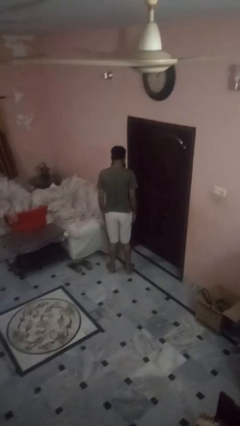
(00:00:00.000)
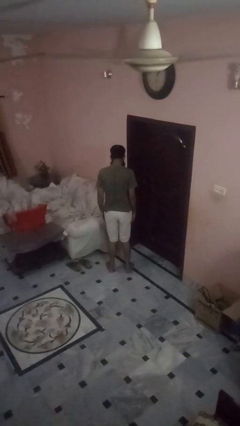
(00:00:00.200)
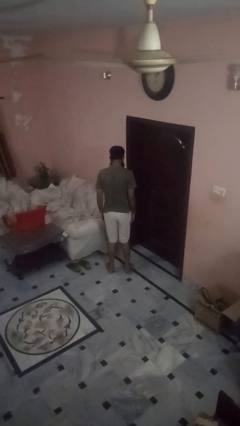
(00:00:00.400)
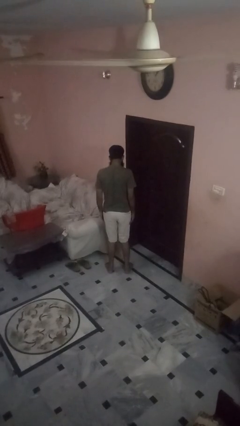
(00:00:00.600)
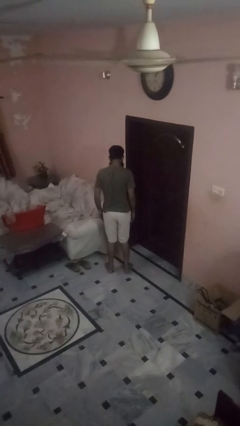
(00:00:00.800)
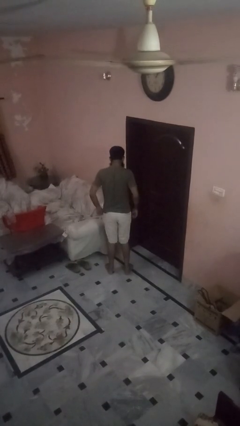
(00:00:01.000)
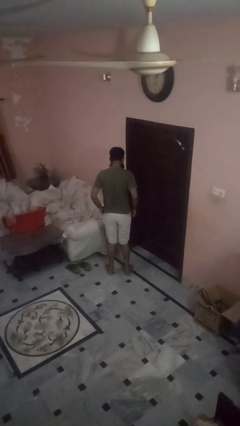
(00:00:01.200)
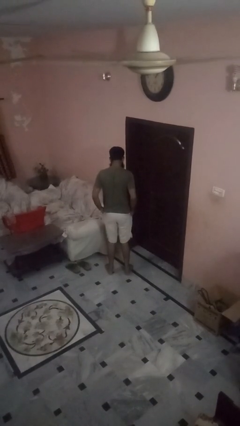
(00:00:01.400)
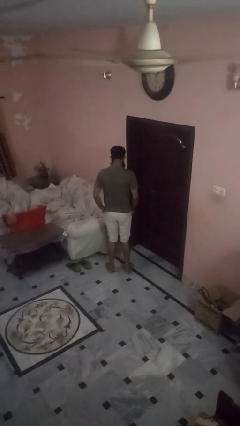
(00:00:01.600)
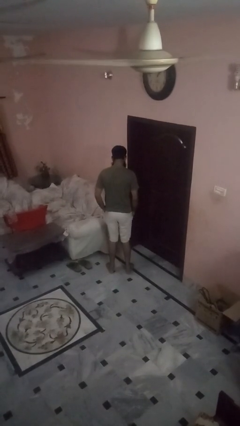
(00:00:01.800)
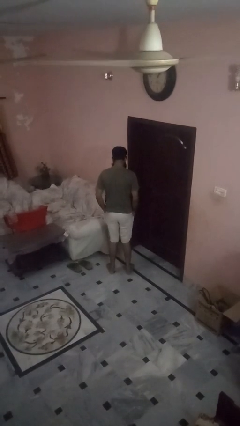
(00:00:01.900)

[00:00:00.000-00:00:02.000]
person puts hands in back pockets

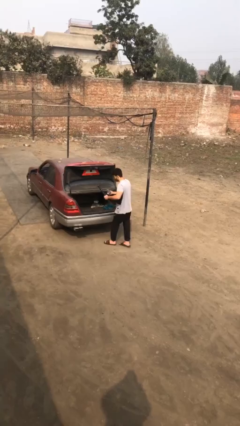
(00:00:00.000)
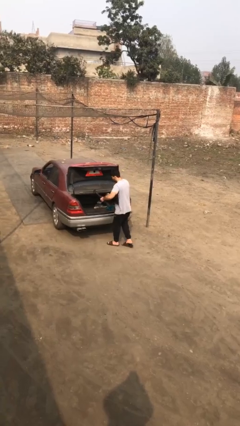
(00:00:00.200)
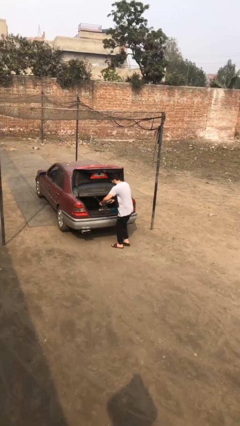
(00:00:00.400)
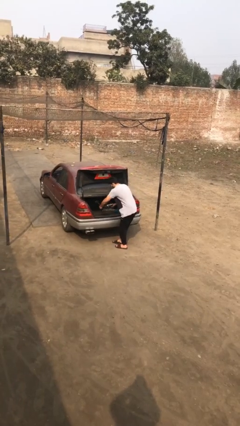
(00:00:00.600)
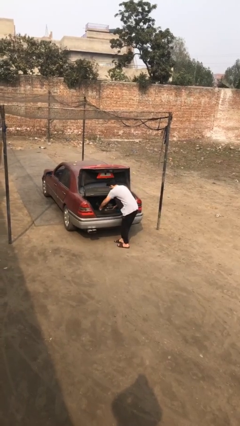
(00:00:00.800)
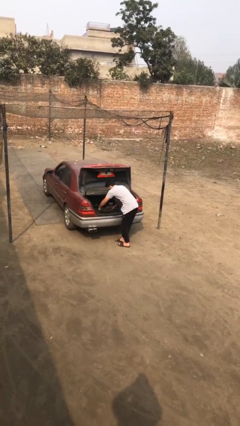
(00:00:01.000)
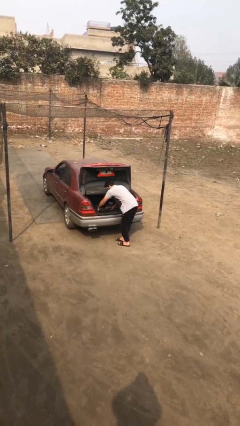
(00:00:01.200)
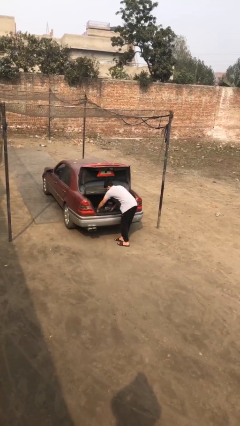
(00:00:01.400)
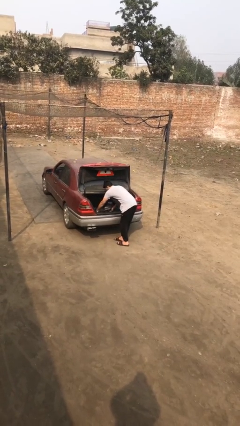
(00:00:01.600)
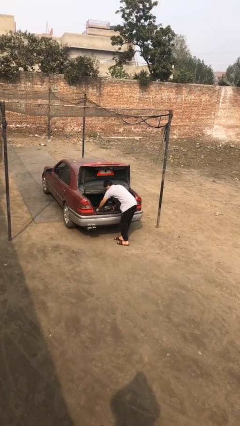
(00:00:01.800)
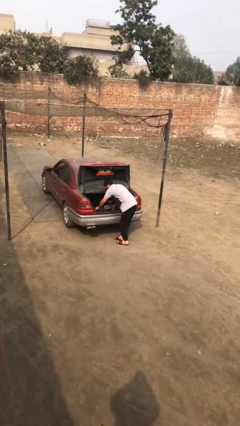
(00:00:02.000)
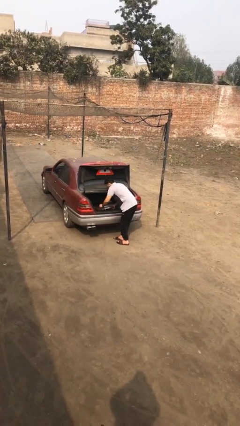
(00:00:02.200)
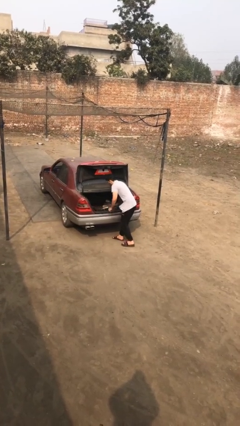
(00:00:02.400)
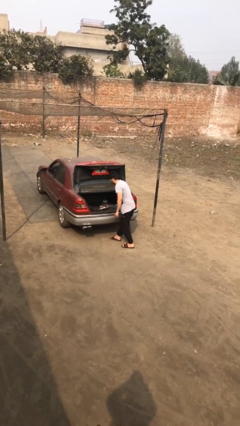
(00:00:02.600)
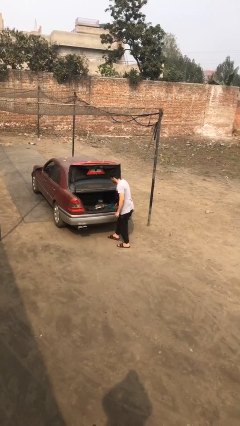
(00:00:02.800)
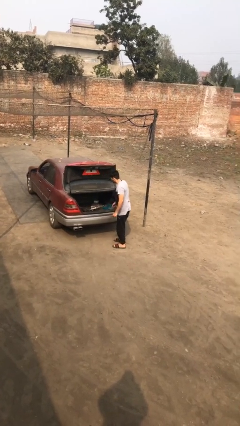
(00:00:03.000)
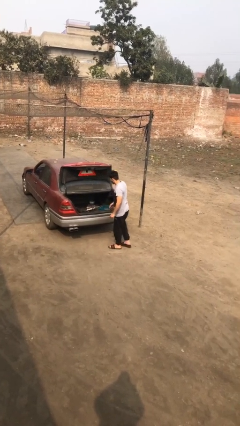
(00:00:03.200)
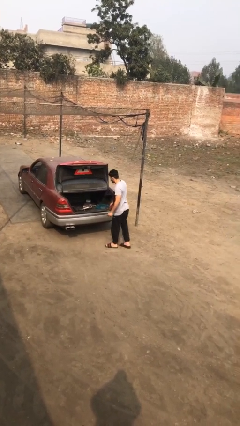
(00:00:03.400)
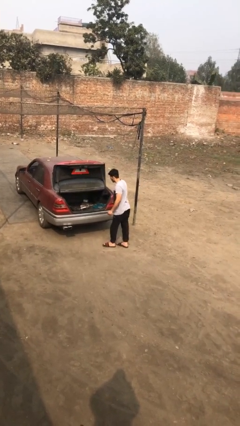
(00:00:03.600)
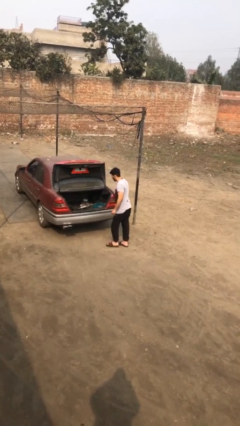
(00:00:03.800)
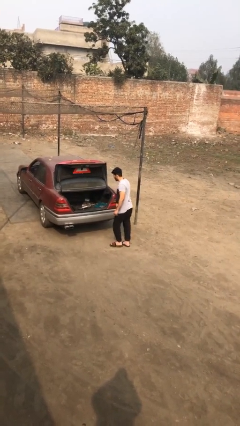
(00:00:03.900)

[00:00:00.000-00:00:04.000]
person loads car

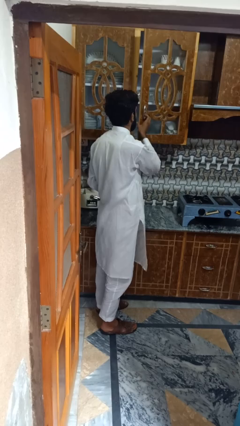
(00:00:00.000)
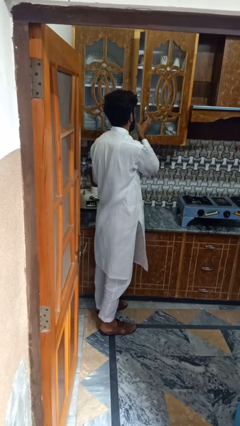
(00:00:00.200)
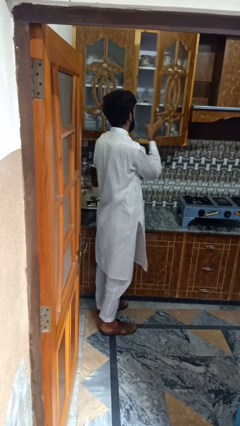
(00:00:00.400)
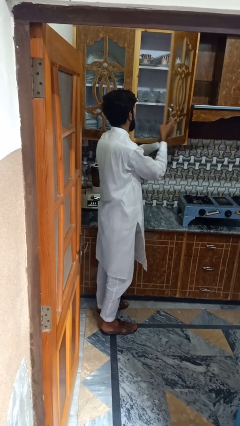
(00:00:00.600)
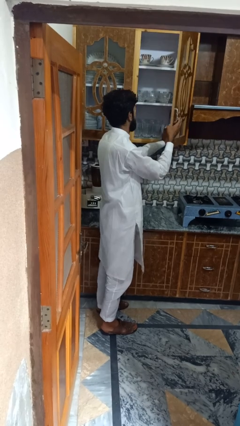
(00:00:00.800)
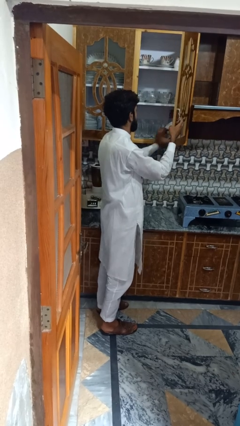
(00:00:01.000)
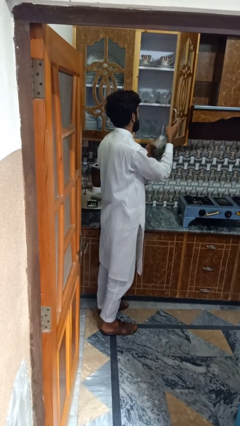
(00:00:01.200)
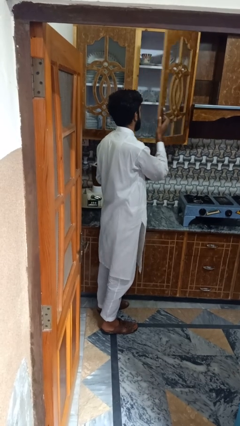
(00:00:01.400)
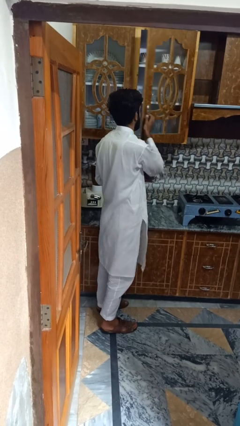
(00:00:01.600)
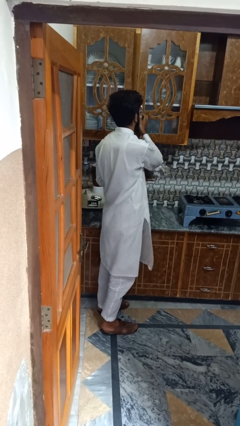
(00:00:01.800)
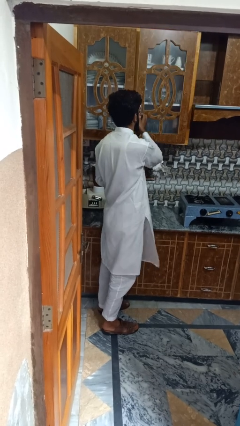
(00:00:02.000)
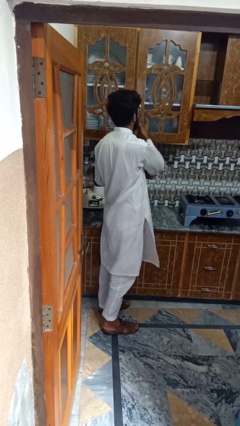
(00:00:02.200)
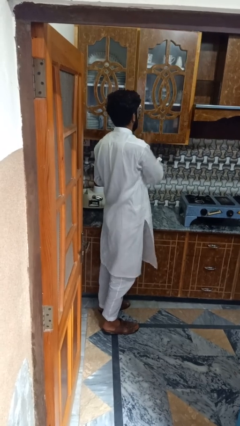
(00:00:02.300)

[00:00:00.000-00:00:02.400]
person puts object into kitchen drawer

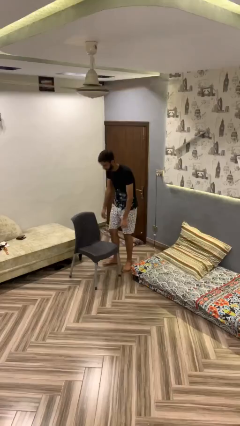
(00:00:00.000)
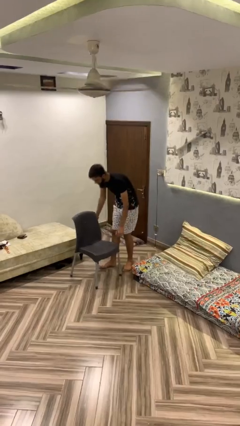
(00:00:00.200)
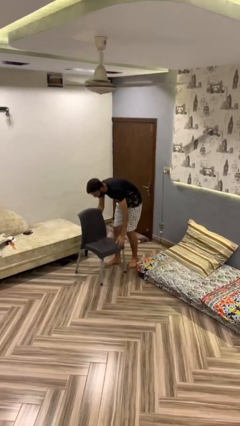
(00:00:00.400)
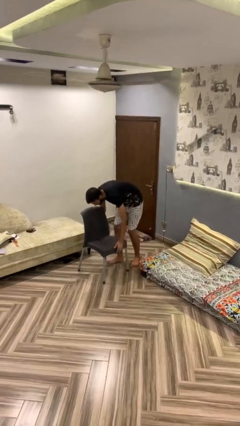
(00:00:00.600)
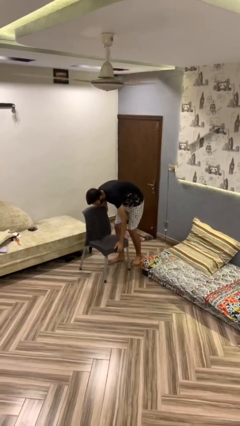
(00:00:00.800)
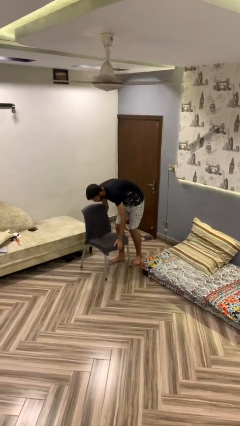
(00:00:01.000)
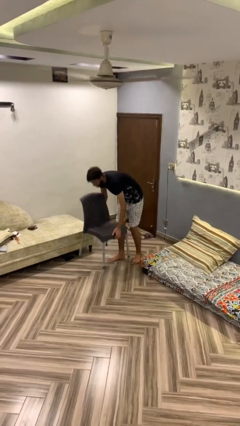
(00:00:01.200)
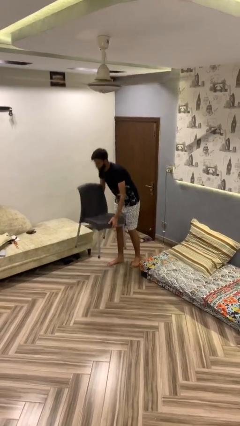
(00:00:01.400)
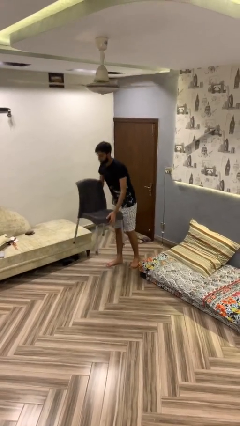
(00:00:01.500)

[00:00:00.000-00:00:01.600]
person picks up object from floor

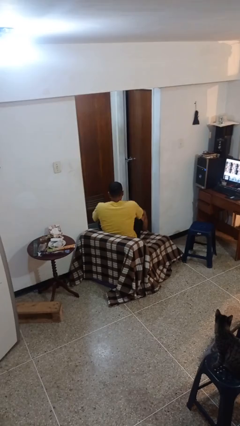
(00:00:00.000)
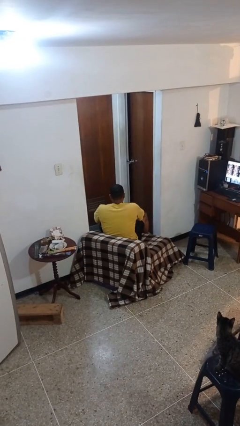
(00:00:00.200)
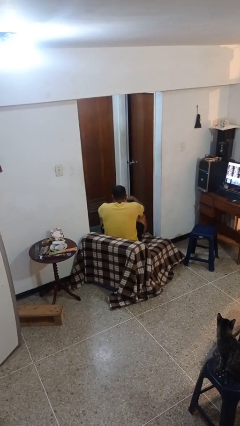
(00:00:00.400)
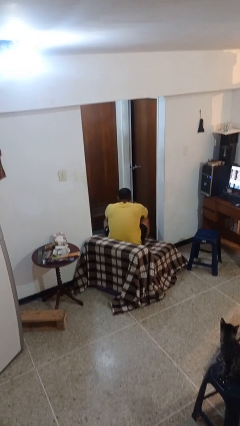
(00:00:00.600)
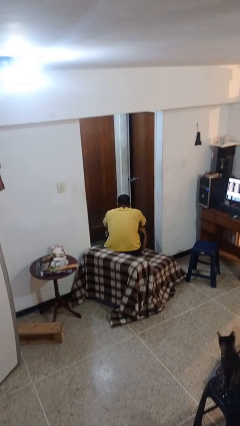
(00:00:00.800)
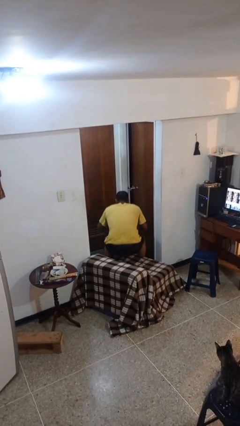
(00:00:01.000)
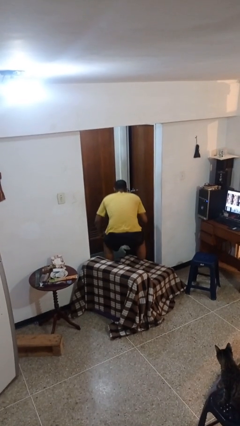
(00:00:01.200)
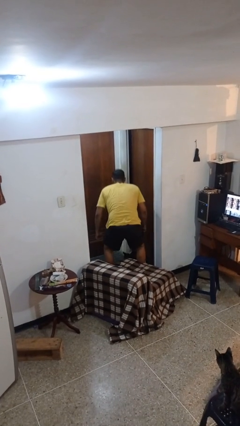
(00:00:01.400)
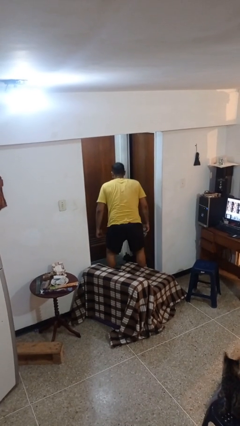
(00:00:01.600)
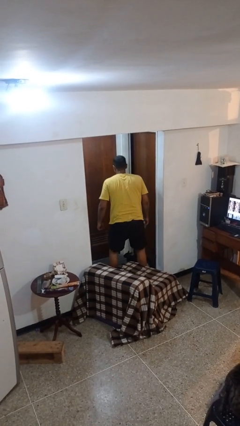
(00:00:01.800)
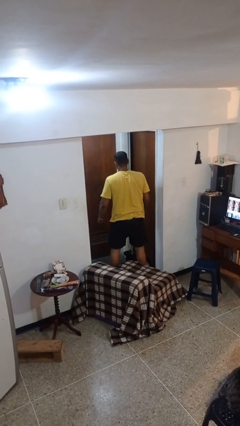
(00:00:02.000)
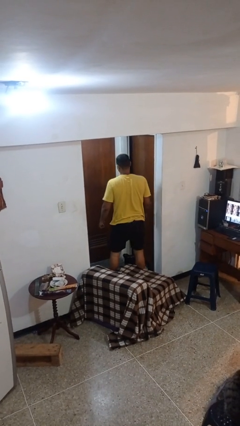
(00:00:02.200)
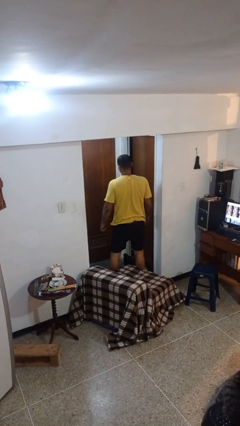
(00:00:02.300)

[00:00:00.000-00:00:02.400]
person stands up

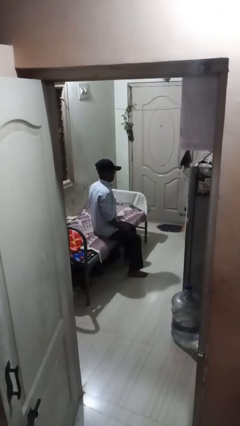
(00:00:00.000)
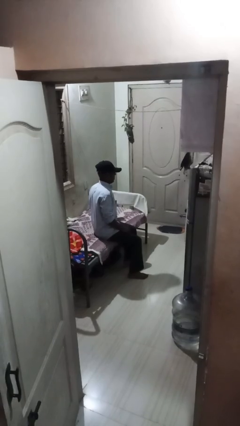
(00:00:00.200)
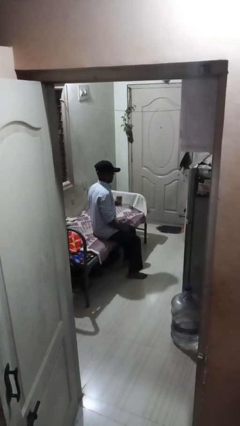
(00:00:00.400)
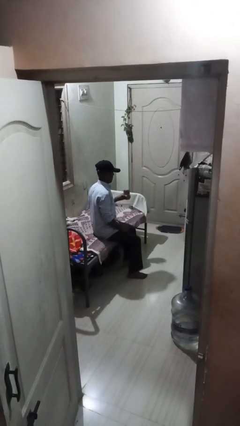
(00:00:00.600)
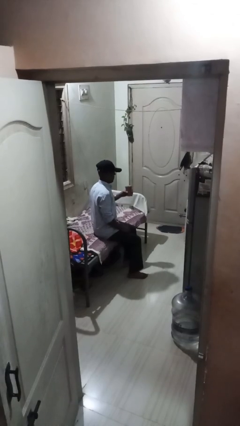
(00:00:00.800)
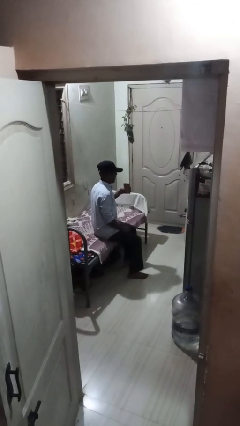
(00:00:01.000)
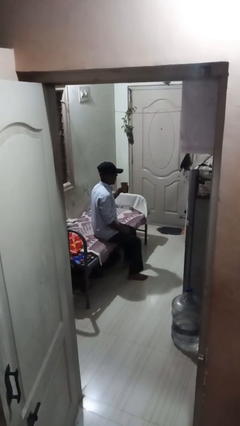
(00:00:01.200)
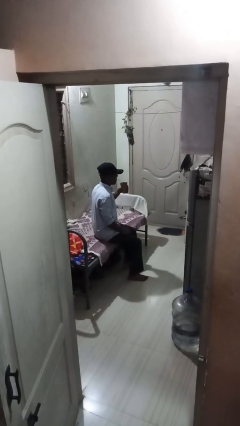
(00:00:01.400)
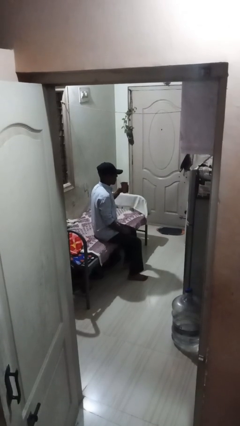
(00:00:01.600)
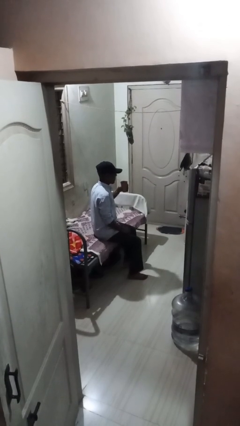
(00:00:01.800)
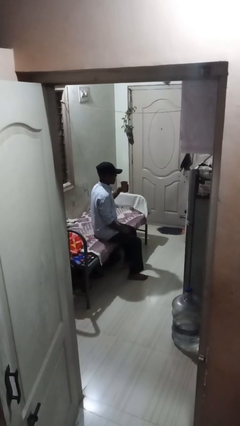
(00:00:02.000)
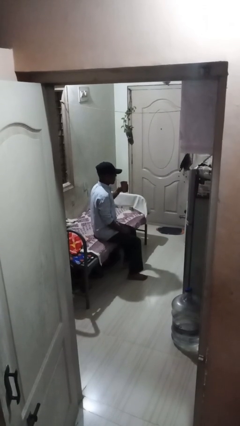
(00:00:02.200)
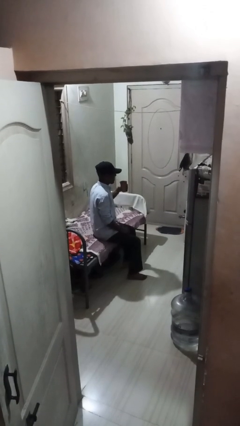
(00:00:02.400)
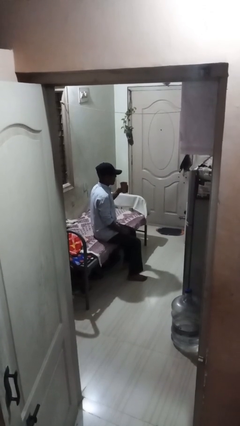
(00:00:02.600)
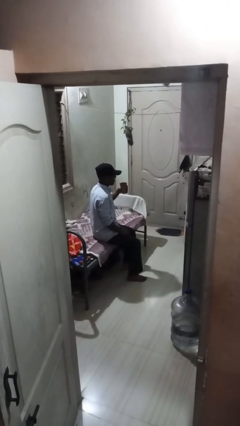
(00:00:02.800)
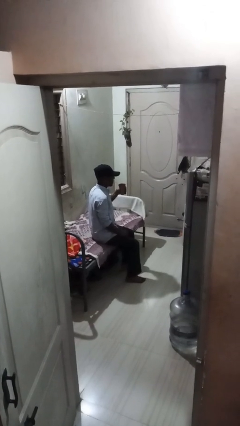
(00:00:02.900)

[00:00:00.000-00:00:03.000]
person drinks from straw

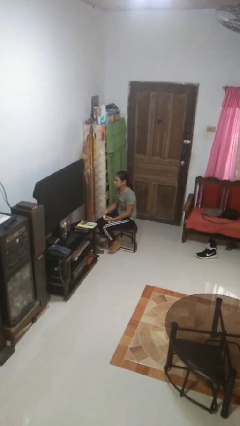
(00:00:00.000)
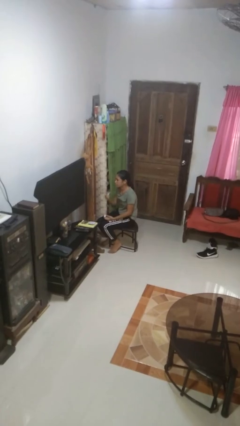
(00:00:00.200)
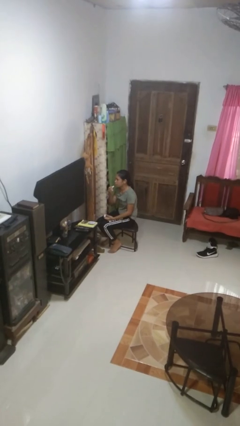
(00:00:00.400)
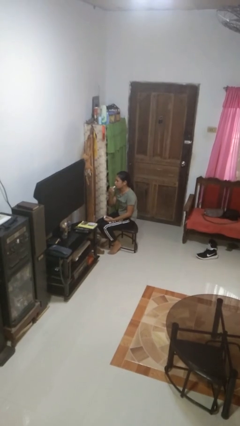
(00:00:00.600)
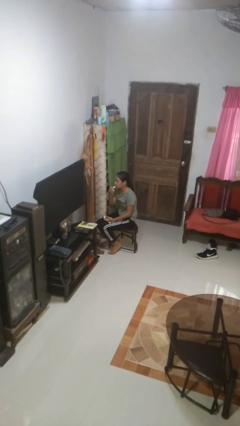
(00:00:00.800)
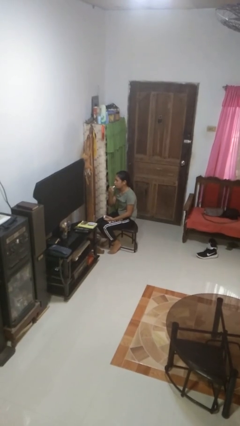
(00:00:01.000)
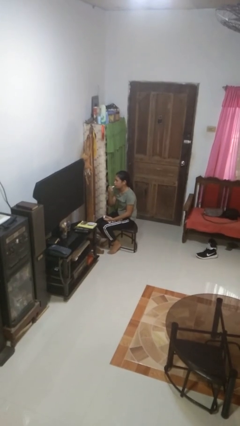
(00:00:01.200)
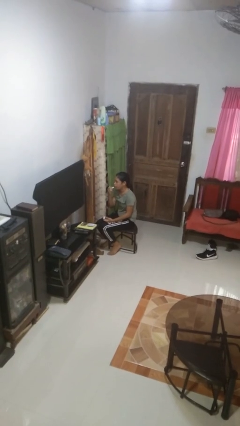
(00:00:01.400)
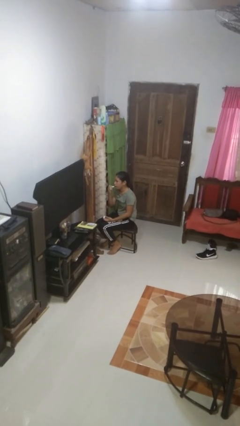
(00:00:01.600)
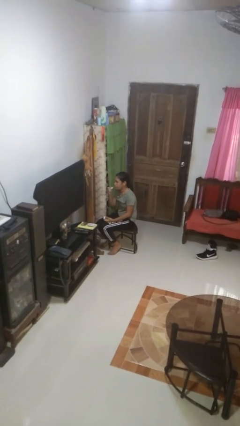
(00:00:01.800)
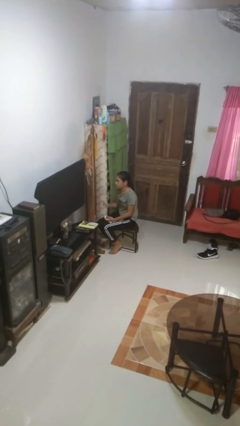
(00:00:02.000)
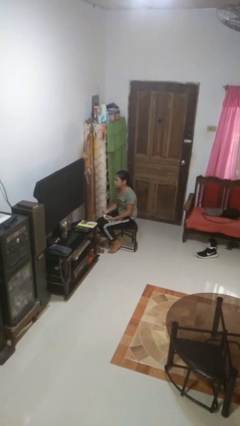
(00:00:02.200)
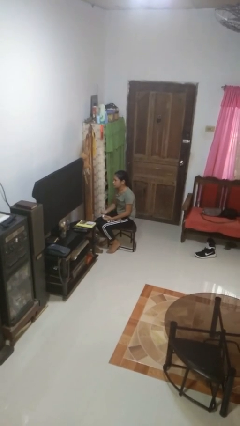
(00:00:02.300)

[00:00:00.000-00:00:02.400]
person applies lip makeup
